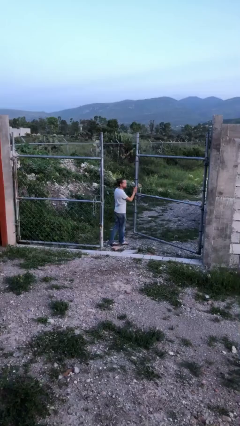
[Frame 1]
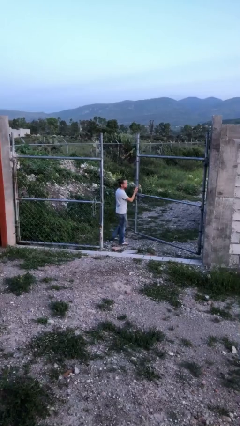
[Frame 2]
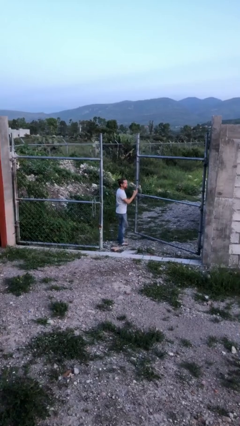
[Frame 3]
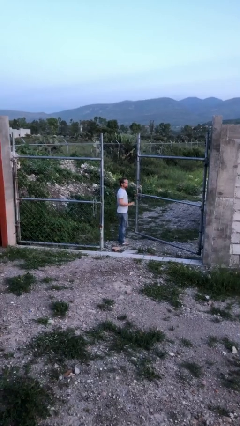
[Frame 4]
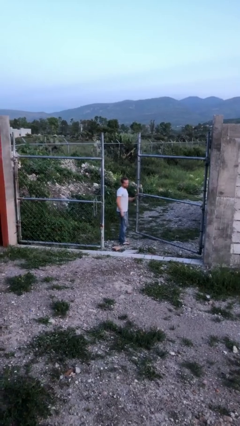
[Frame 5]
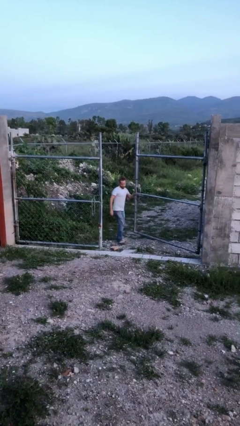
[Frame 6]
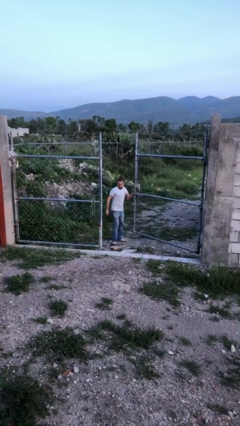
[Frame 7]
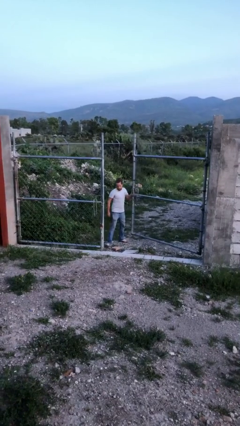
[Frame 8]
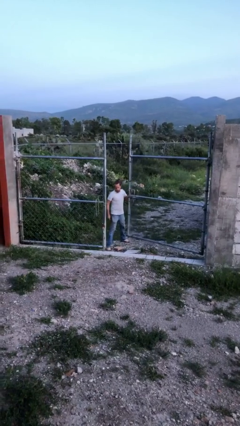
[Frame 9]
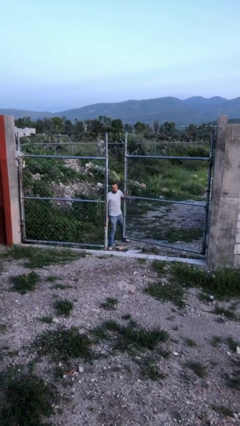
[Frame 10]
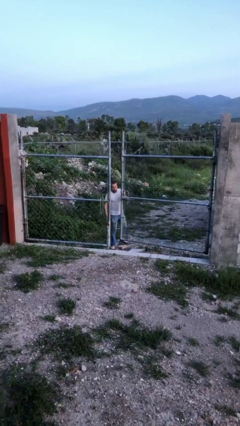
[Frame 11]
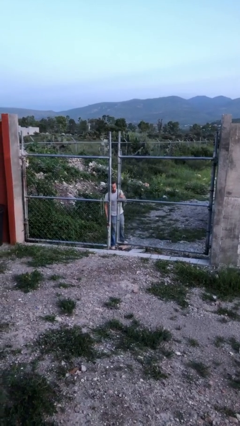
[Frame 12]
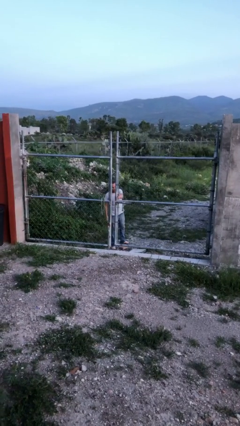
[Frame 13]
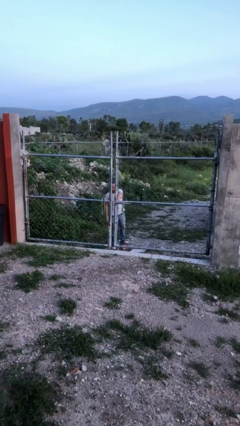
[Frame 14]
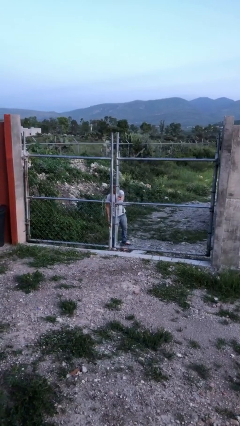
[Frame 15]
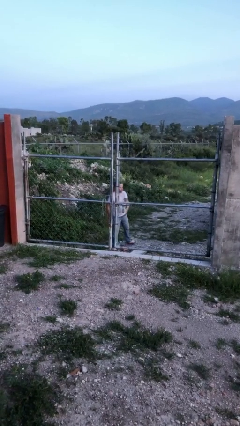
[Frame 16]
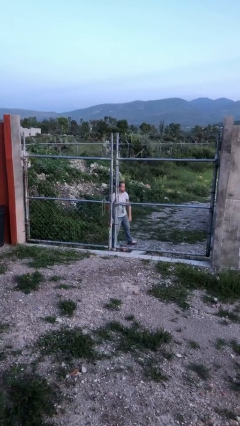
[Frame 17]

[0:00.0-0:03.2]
person closes gate

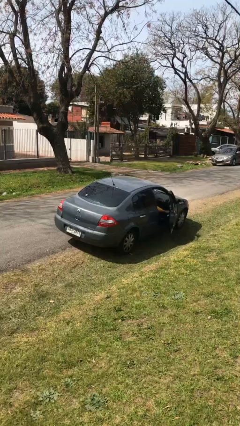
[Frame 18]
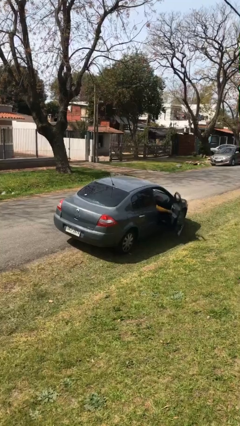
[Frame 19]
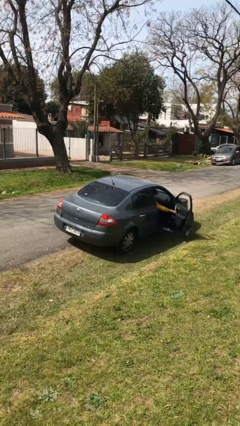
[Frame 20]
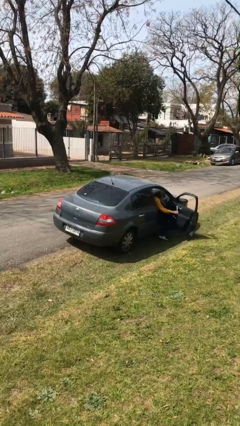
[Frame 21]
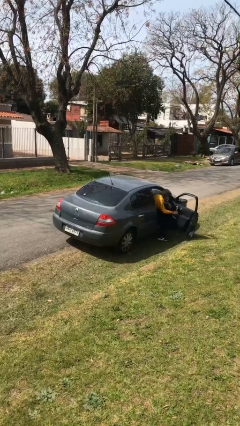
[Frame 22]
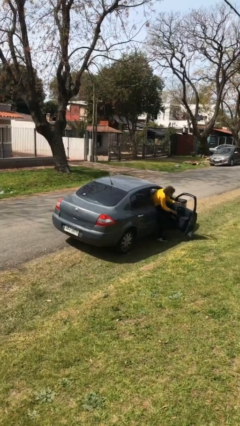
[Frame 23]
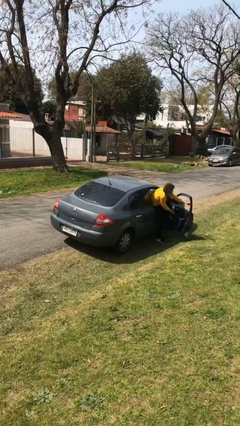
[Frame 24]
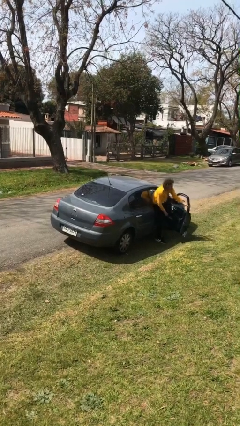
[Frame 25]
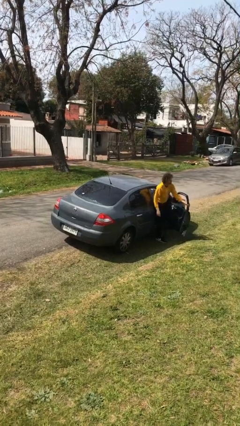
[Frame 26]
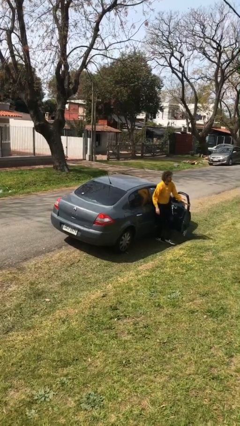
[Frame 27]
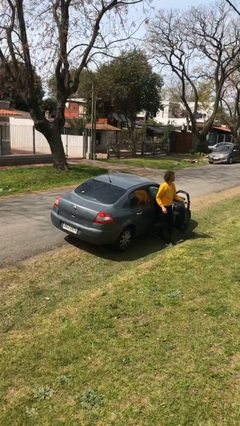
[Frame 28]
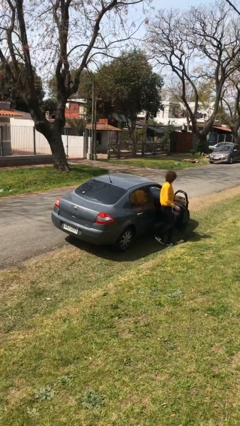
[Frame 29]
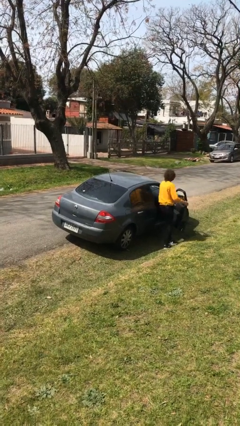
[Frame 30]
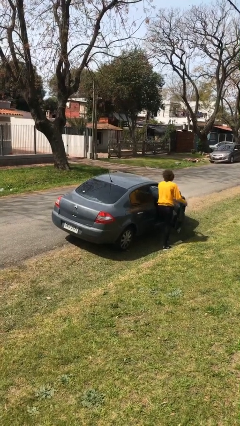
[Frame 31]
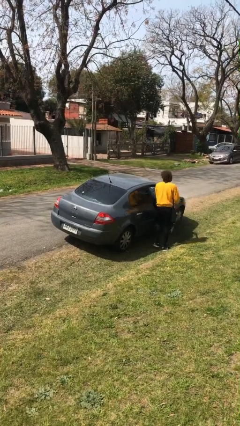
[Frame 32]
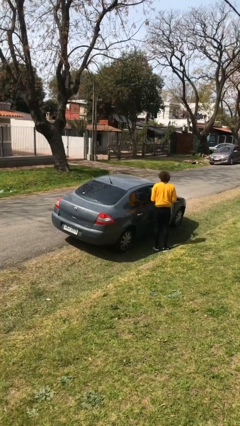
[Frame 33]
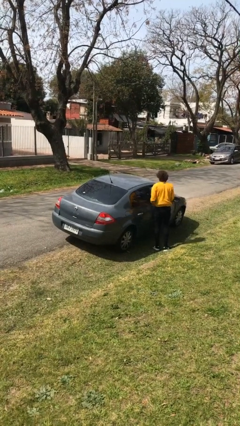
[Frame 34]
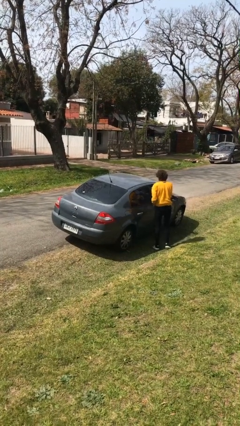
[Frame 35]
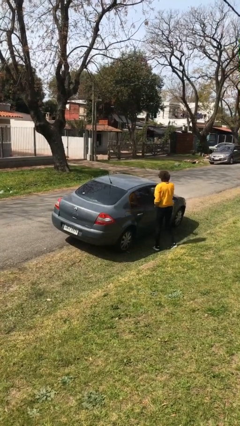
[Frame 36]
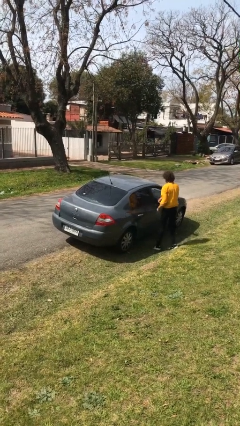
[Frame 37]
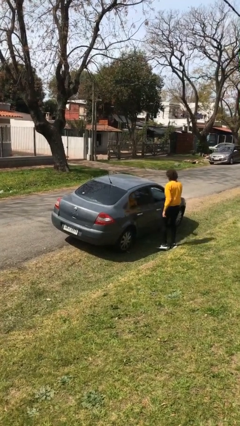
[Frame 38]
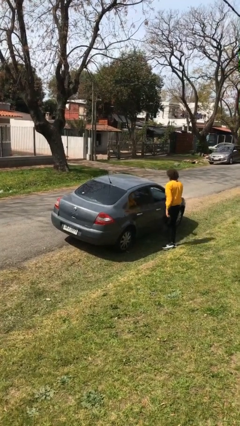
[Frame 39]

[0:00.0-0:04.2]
car drops off person
